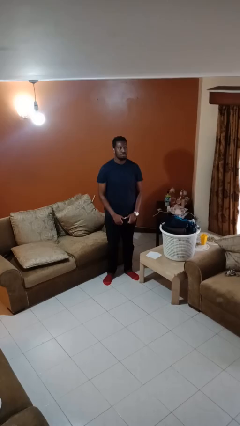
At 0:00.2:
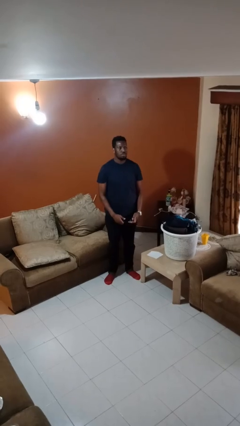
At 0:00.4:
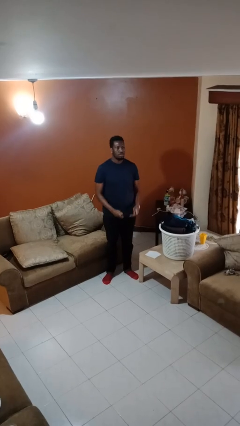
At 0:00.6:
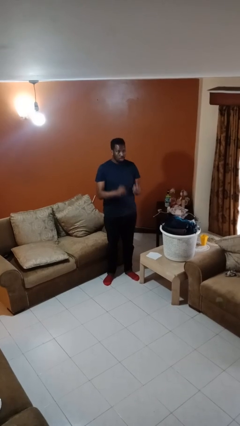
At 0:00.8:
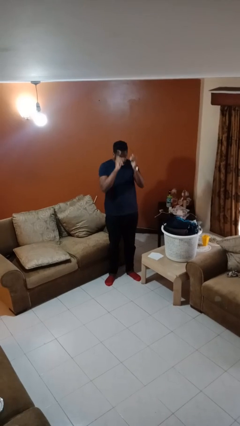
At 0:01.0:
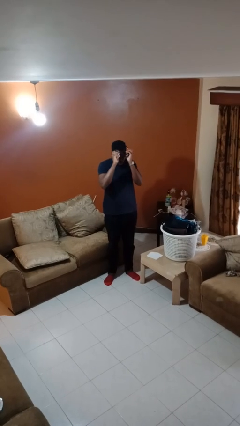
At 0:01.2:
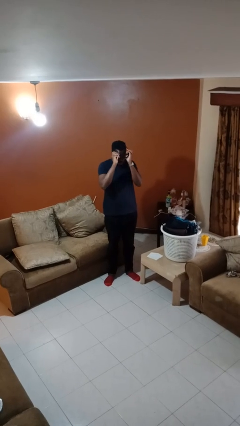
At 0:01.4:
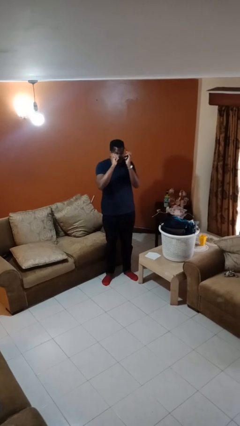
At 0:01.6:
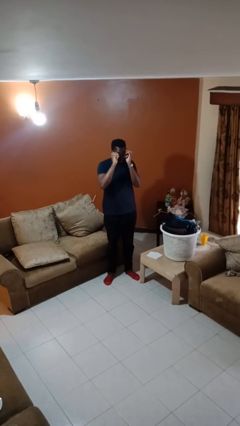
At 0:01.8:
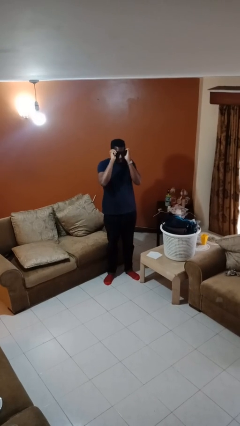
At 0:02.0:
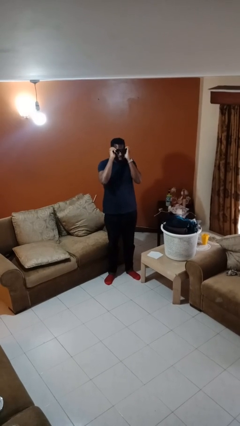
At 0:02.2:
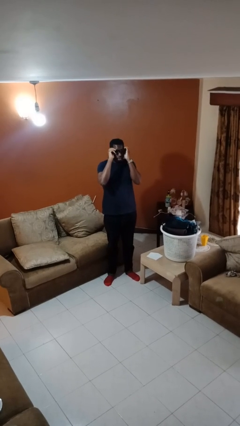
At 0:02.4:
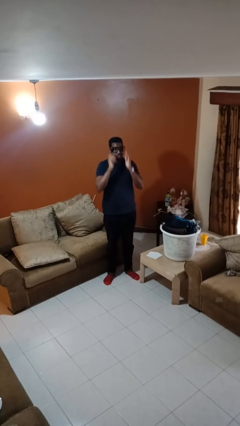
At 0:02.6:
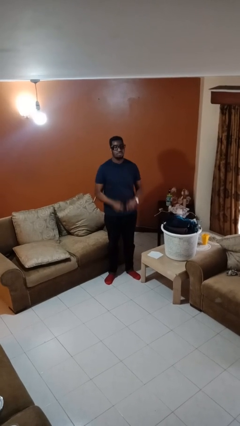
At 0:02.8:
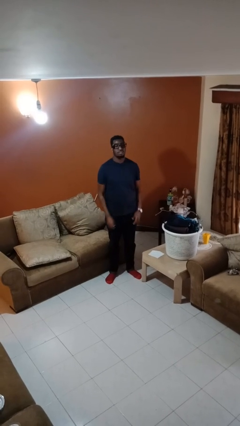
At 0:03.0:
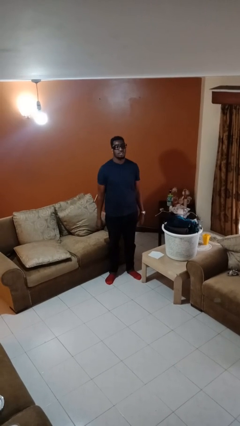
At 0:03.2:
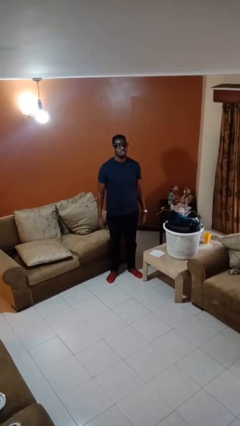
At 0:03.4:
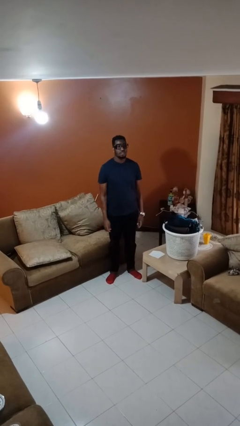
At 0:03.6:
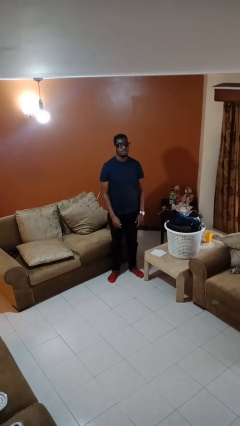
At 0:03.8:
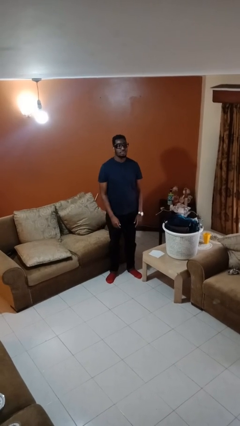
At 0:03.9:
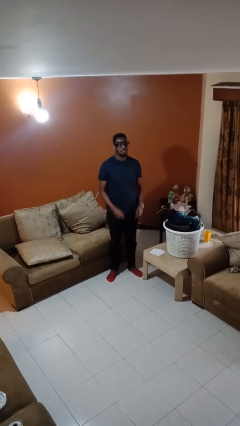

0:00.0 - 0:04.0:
person puts on glasses

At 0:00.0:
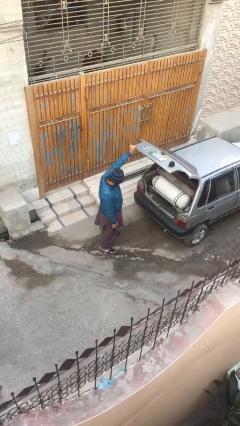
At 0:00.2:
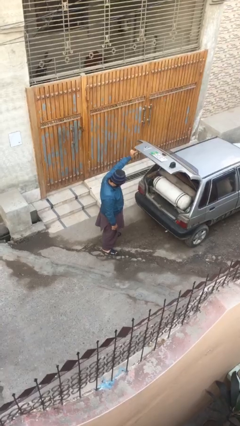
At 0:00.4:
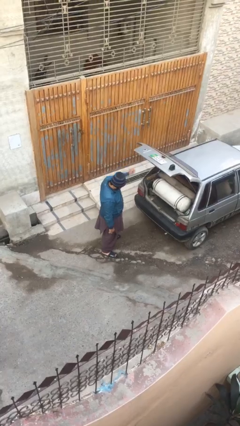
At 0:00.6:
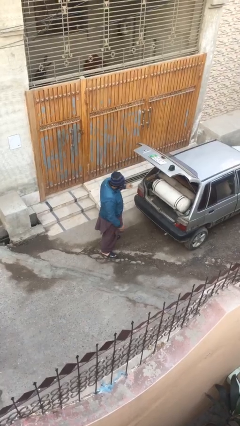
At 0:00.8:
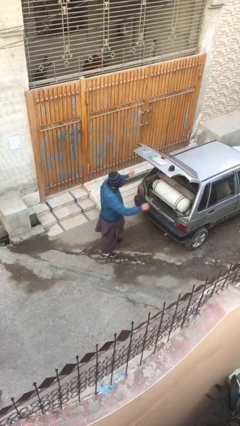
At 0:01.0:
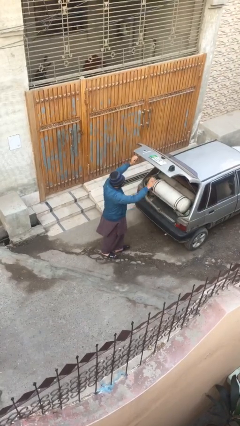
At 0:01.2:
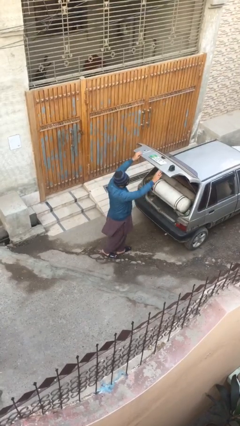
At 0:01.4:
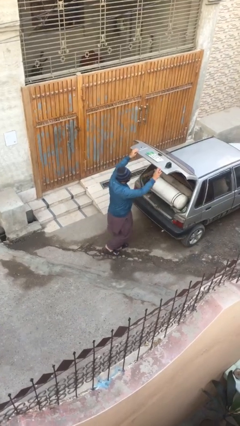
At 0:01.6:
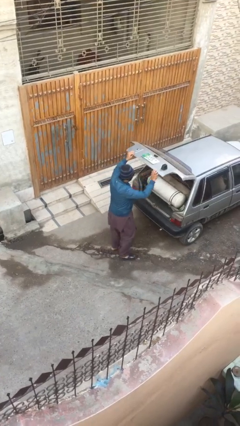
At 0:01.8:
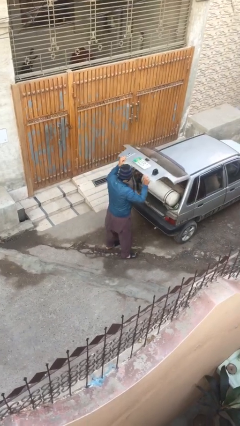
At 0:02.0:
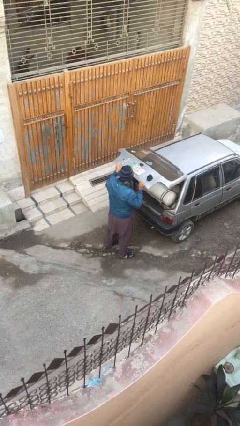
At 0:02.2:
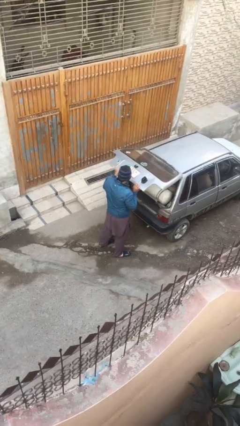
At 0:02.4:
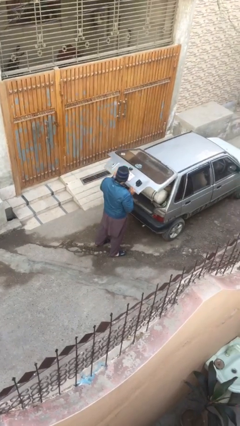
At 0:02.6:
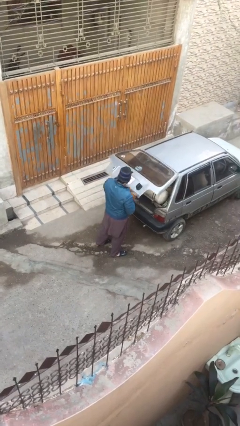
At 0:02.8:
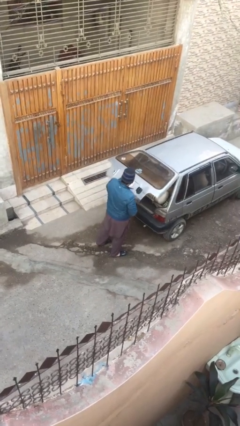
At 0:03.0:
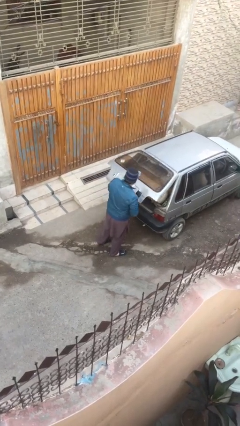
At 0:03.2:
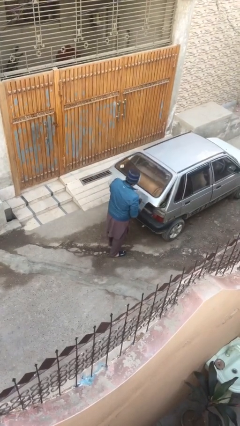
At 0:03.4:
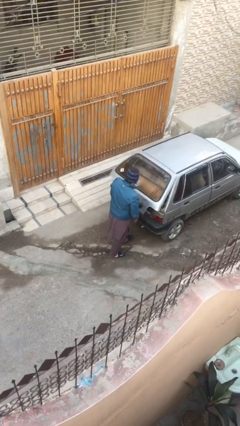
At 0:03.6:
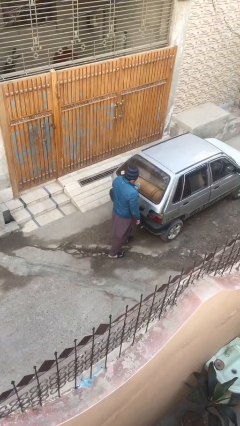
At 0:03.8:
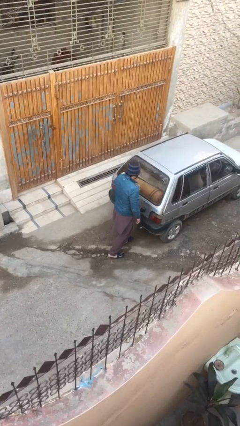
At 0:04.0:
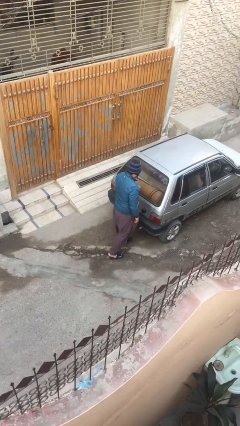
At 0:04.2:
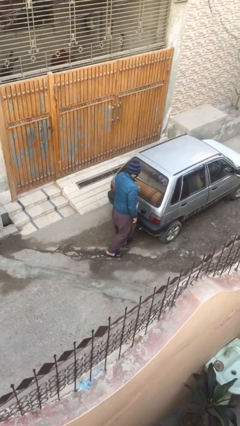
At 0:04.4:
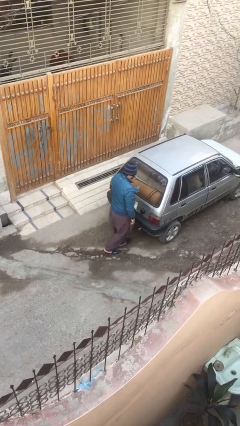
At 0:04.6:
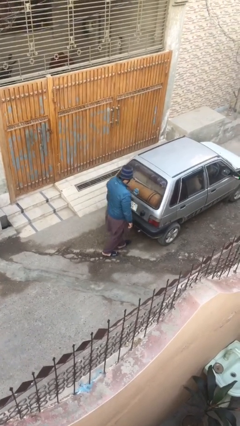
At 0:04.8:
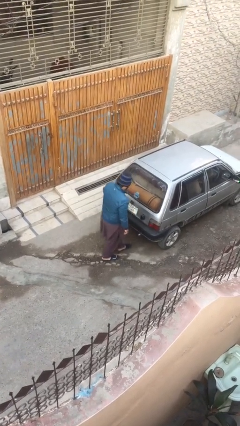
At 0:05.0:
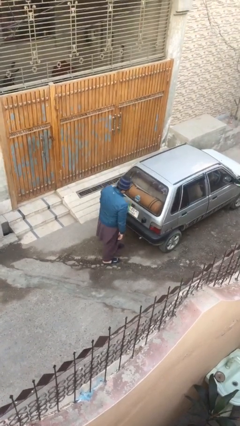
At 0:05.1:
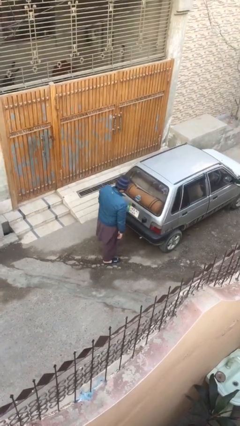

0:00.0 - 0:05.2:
person closes car trunk

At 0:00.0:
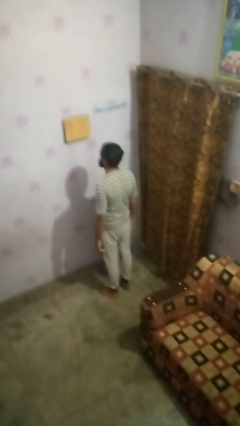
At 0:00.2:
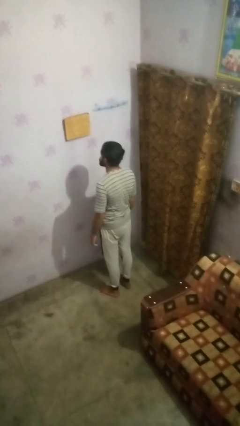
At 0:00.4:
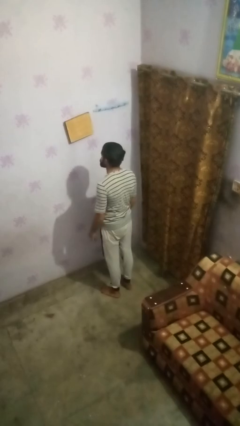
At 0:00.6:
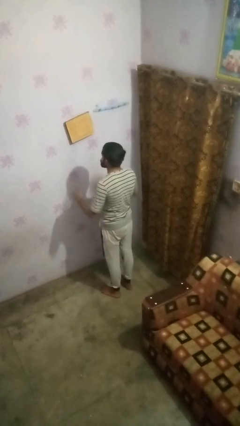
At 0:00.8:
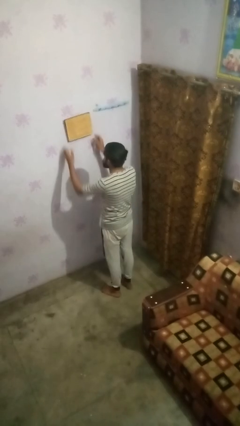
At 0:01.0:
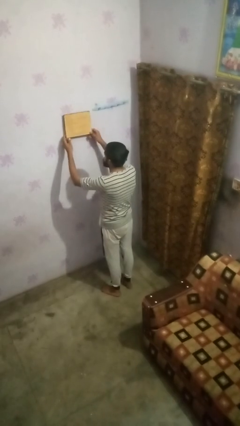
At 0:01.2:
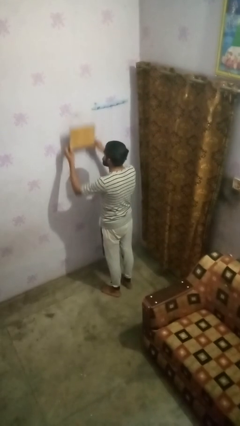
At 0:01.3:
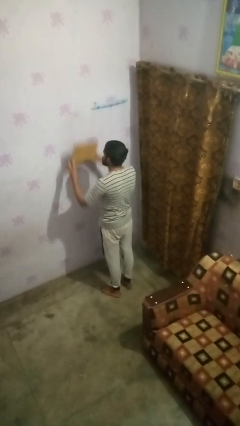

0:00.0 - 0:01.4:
person takes down picture frame

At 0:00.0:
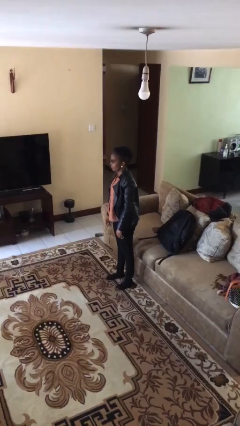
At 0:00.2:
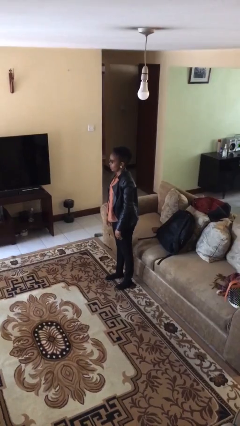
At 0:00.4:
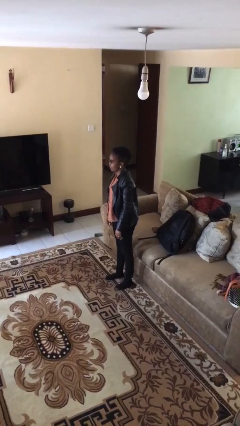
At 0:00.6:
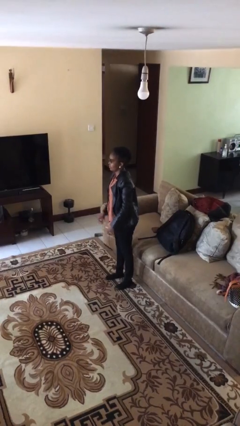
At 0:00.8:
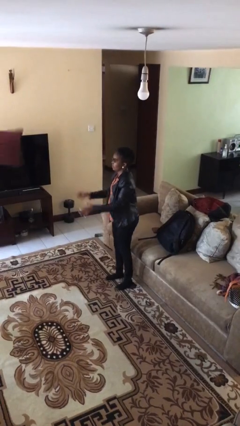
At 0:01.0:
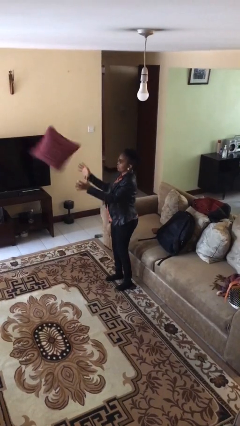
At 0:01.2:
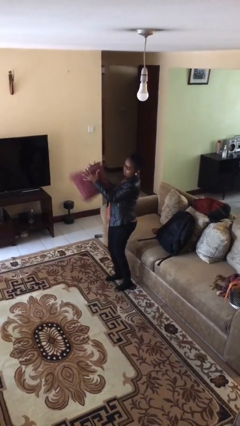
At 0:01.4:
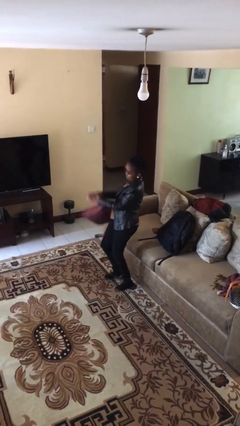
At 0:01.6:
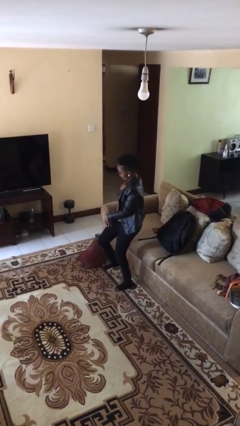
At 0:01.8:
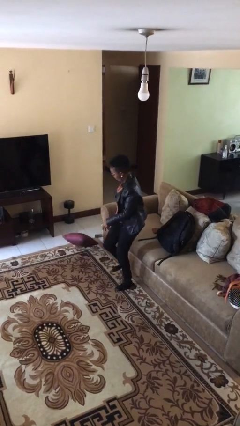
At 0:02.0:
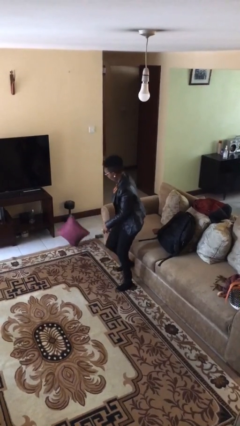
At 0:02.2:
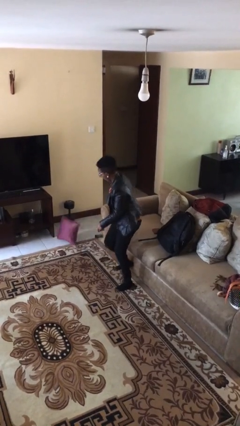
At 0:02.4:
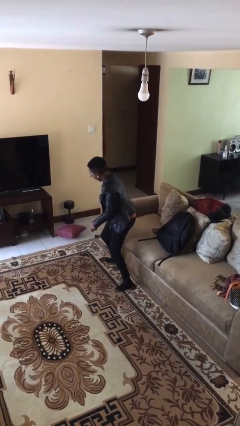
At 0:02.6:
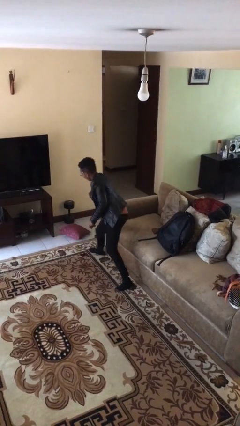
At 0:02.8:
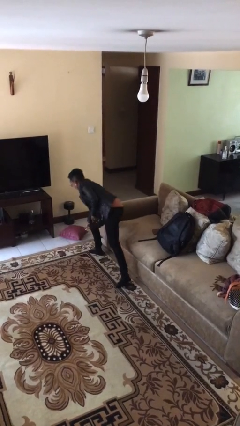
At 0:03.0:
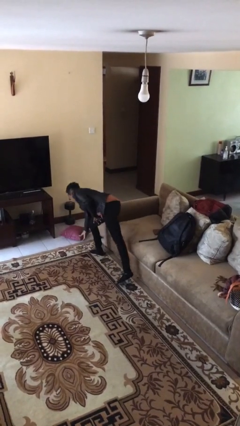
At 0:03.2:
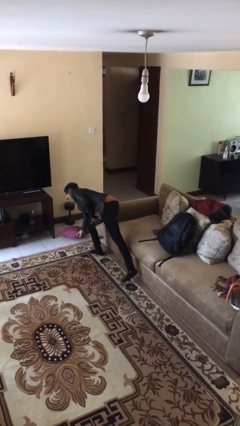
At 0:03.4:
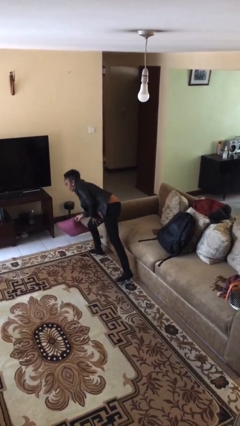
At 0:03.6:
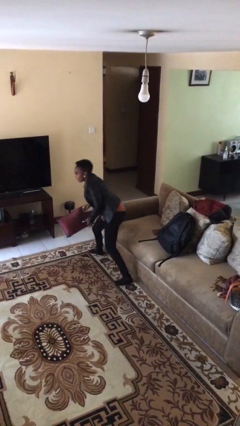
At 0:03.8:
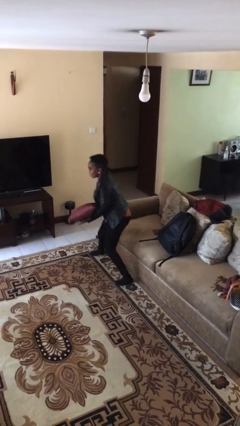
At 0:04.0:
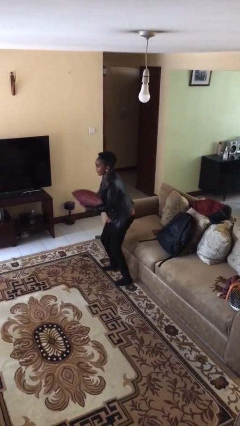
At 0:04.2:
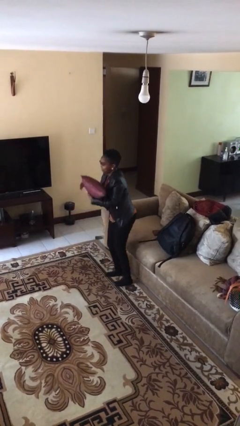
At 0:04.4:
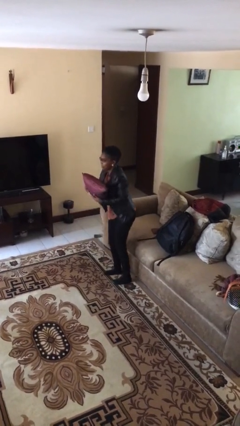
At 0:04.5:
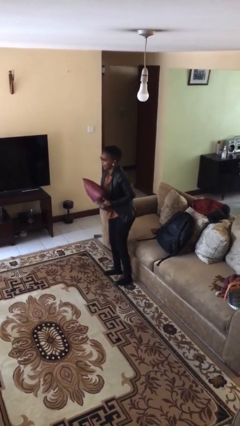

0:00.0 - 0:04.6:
person catches object from person

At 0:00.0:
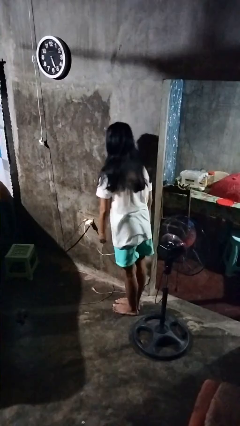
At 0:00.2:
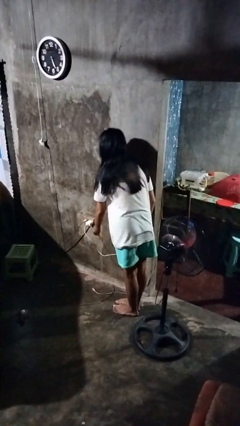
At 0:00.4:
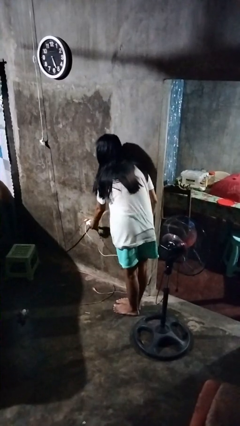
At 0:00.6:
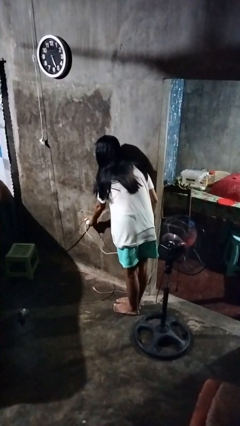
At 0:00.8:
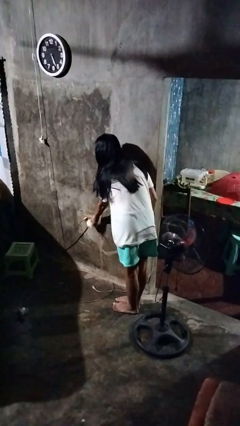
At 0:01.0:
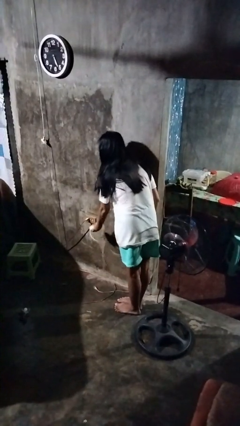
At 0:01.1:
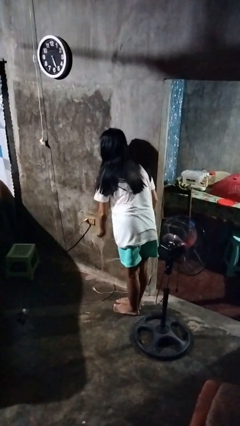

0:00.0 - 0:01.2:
person unplugs from electrical socket

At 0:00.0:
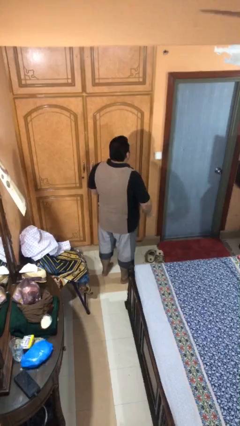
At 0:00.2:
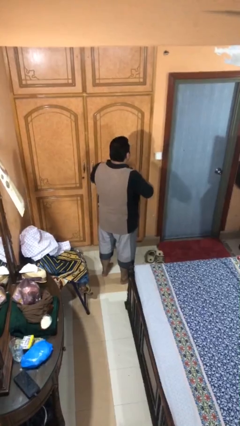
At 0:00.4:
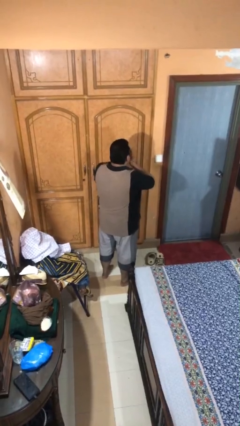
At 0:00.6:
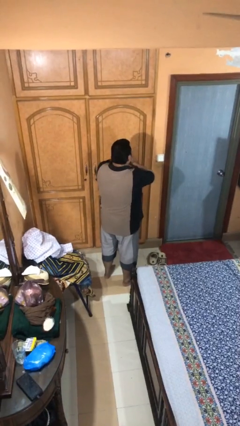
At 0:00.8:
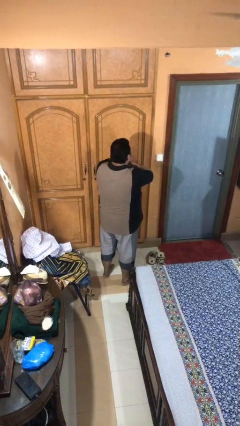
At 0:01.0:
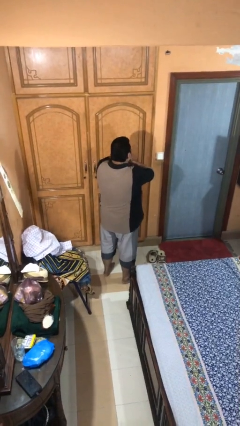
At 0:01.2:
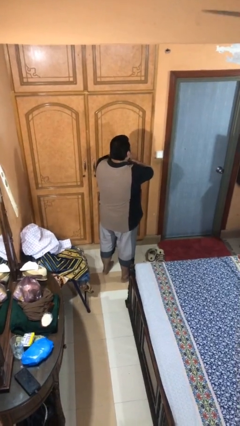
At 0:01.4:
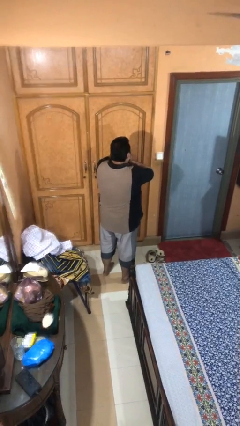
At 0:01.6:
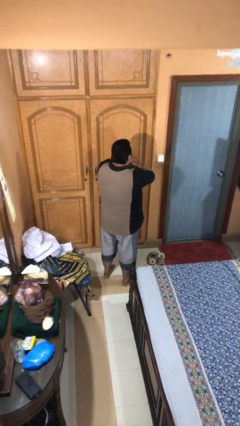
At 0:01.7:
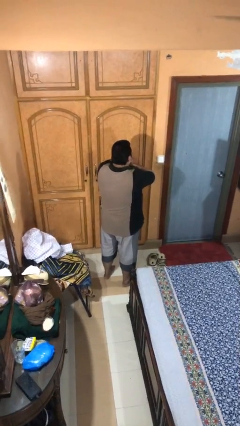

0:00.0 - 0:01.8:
person covers face with hands
